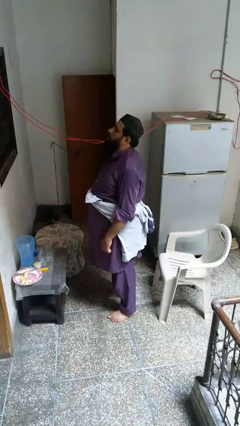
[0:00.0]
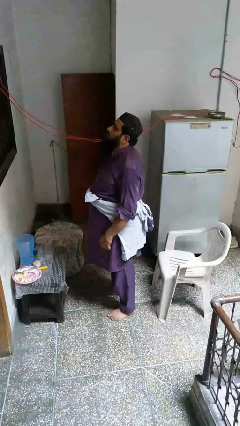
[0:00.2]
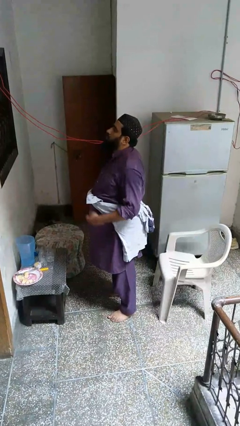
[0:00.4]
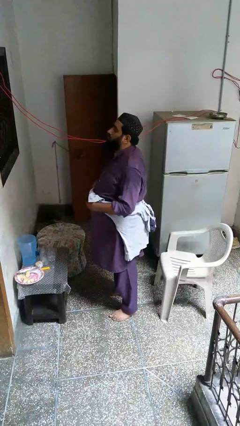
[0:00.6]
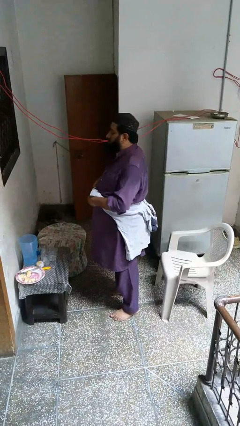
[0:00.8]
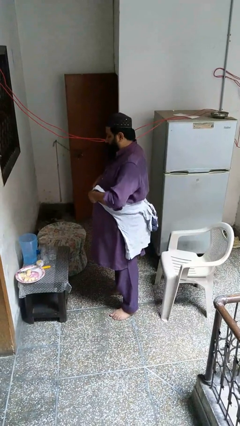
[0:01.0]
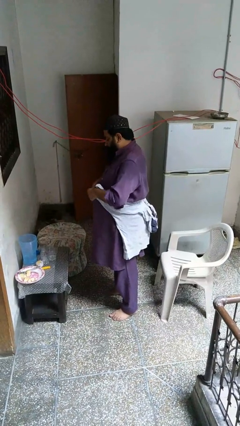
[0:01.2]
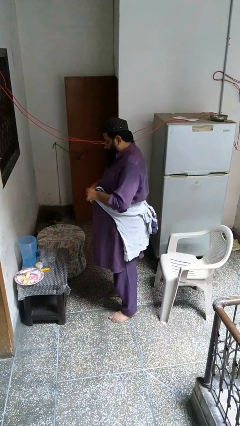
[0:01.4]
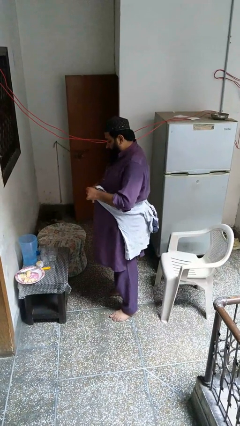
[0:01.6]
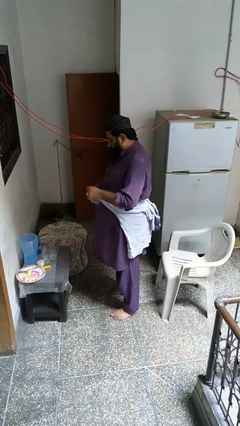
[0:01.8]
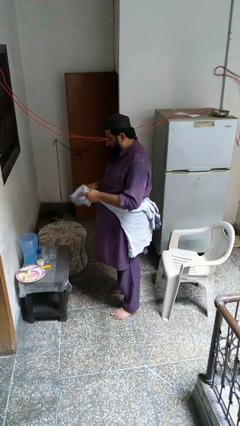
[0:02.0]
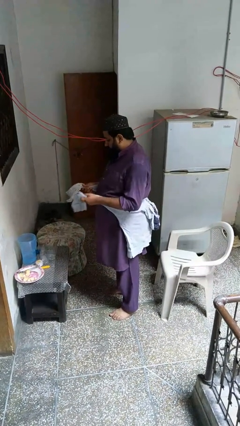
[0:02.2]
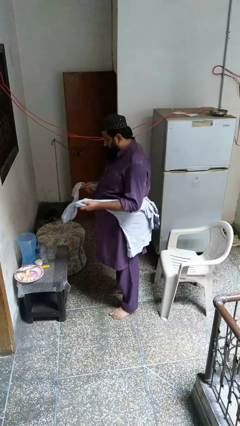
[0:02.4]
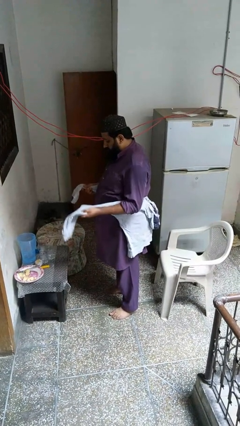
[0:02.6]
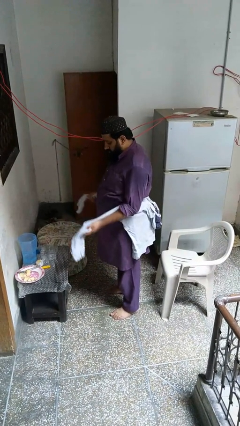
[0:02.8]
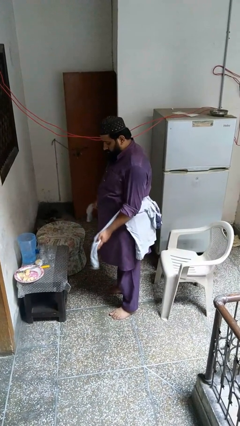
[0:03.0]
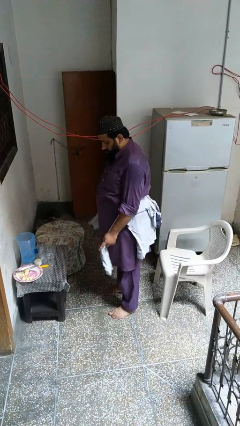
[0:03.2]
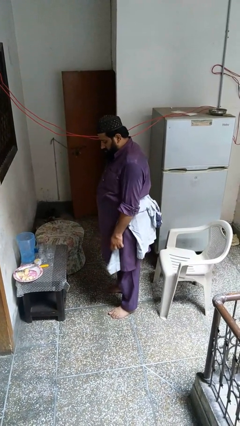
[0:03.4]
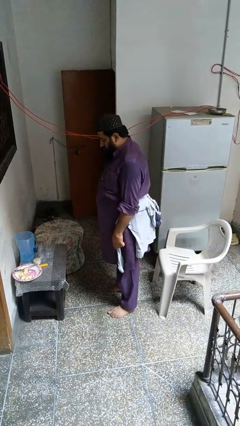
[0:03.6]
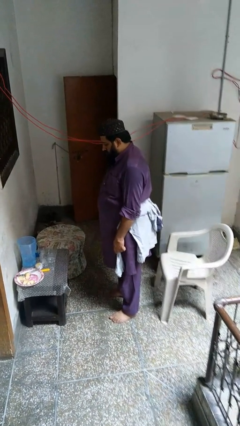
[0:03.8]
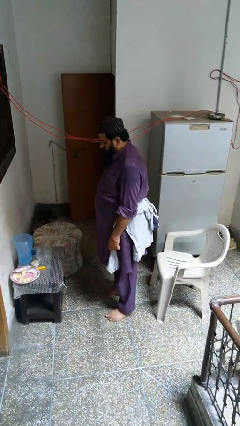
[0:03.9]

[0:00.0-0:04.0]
person unties jacket around waist

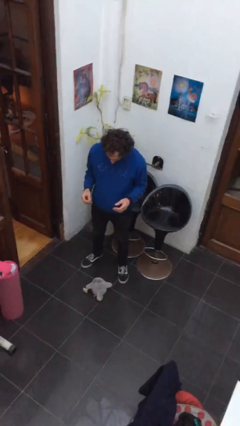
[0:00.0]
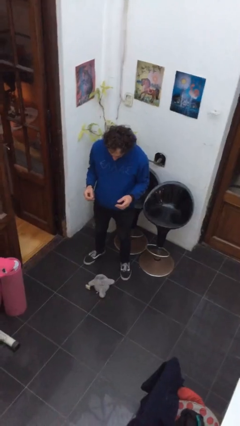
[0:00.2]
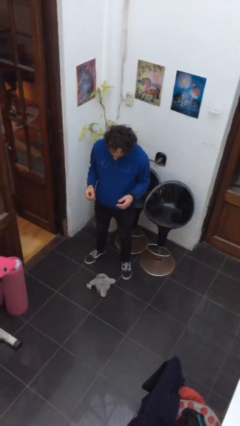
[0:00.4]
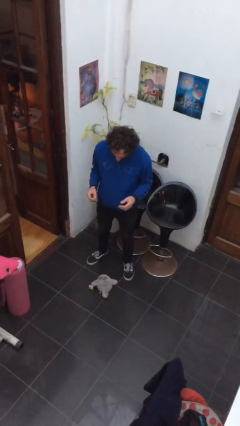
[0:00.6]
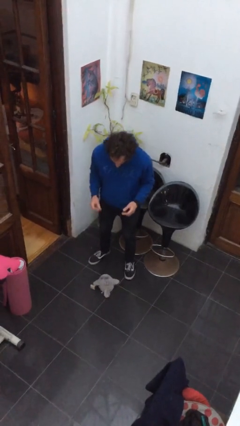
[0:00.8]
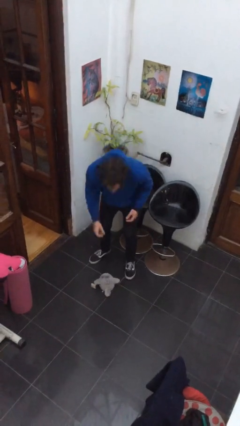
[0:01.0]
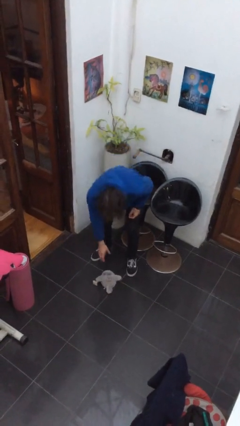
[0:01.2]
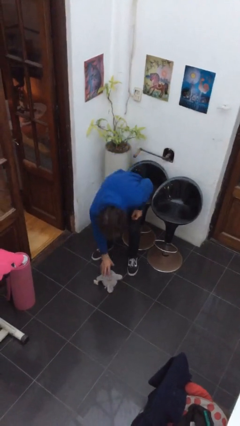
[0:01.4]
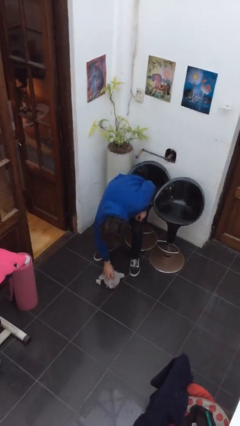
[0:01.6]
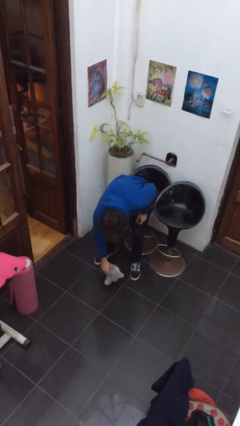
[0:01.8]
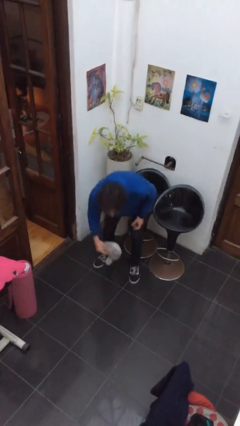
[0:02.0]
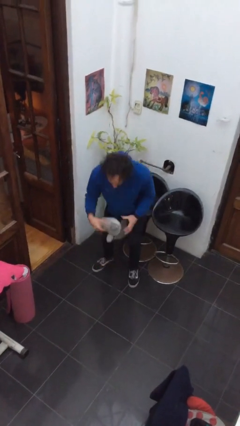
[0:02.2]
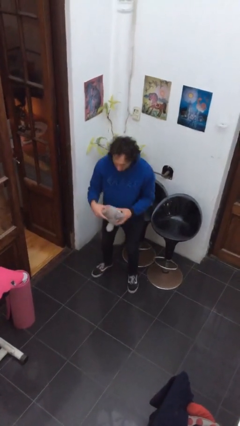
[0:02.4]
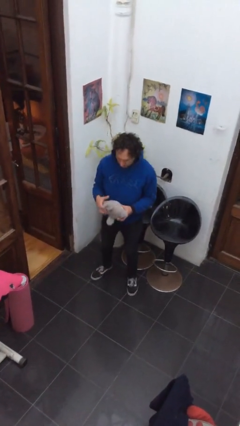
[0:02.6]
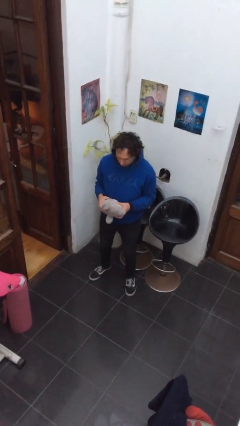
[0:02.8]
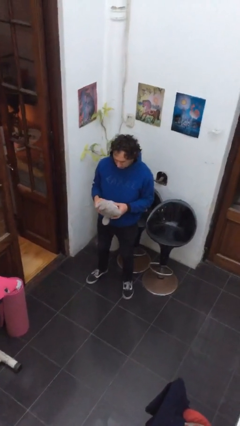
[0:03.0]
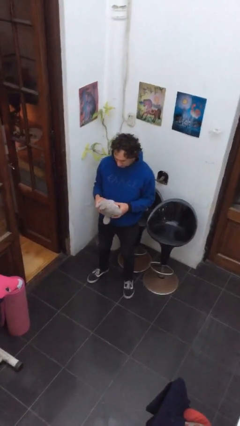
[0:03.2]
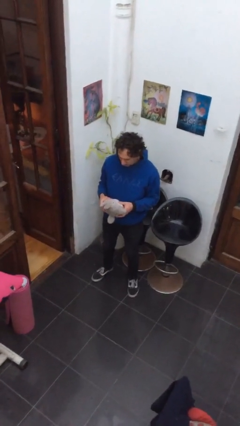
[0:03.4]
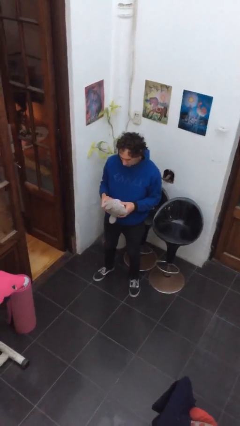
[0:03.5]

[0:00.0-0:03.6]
person picks up object from floor

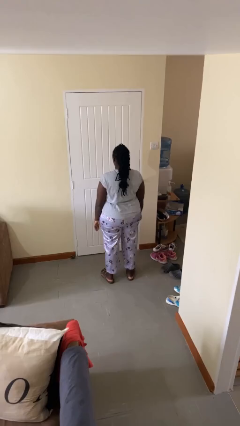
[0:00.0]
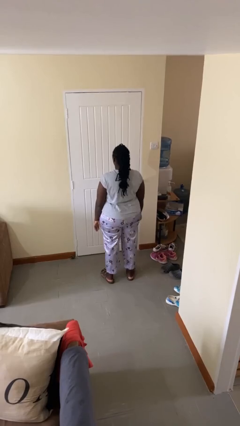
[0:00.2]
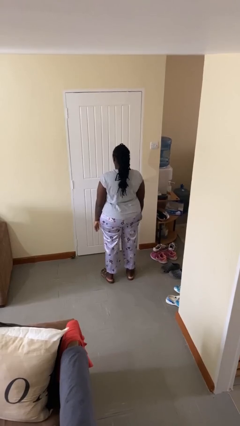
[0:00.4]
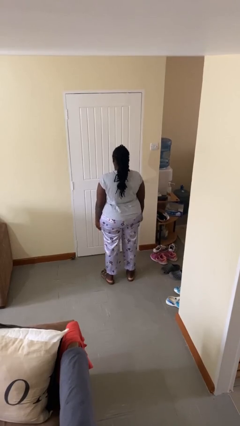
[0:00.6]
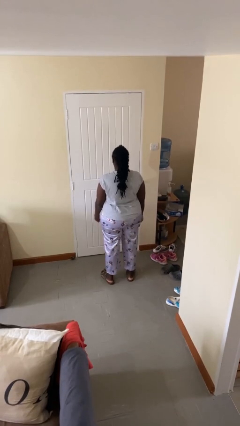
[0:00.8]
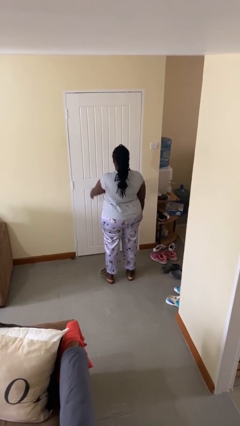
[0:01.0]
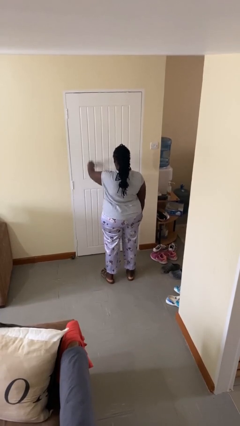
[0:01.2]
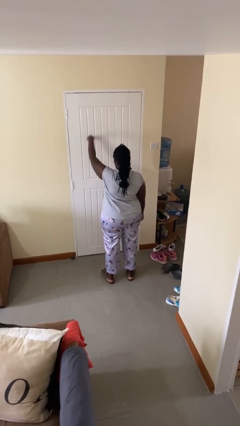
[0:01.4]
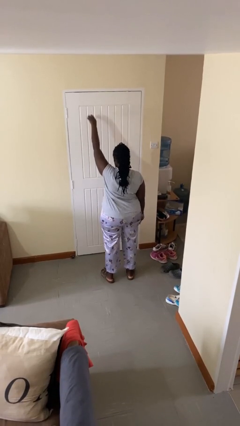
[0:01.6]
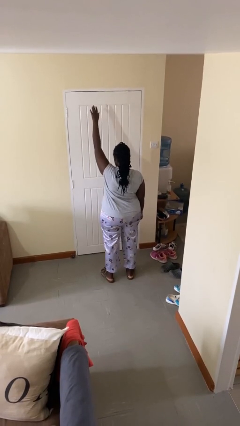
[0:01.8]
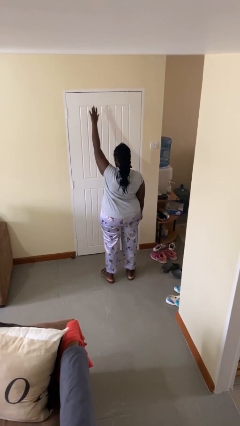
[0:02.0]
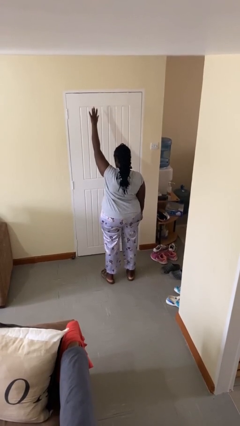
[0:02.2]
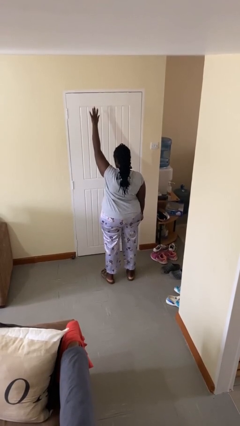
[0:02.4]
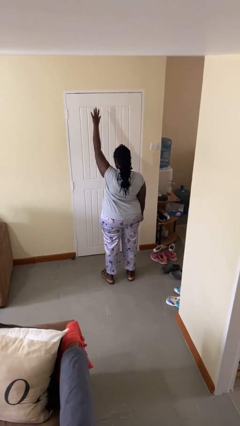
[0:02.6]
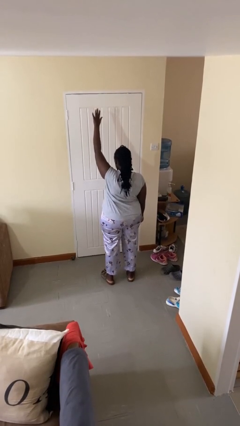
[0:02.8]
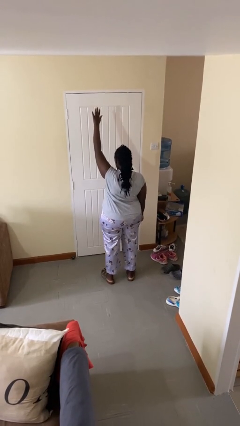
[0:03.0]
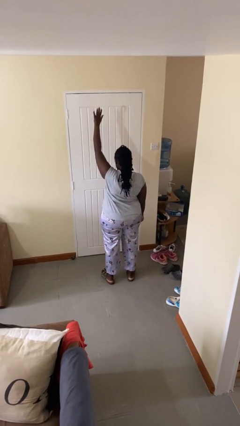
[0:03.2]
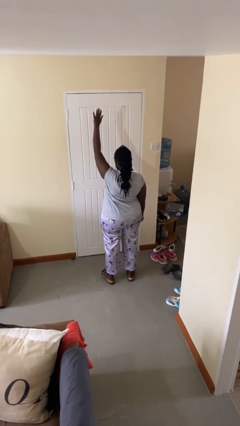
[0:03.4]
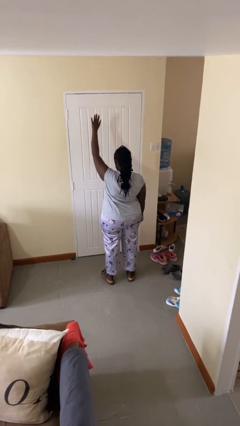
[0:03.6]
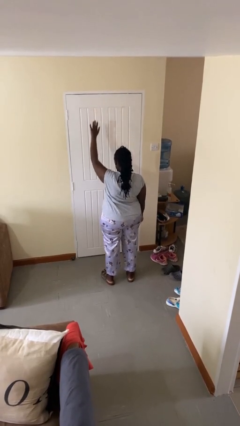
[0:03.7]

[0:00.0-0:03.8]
person gestures swipe up

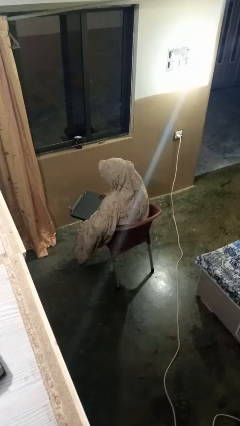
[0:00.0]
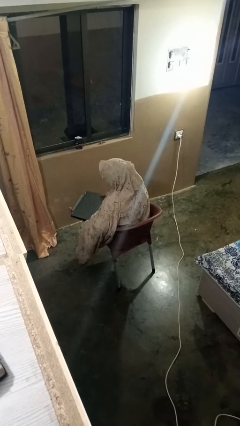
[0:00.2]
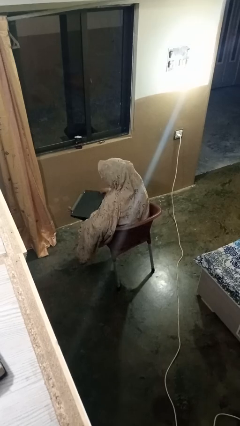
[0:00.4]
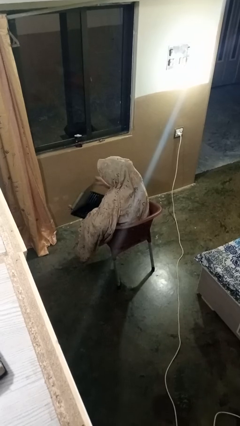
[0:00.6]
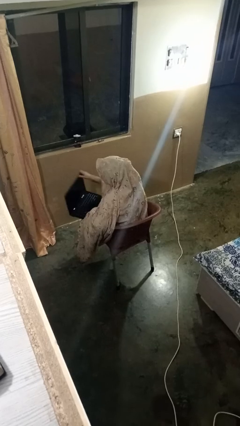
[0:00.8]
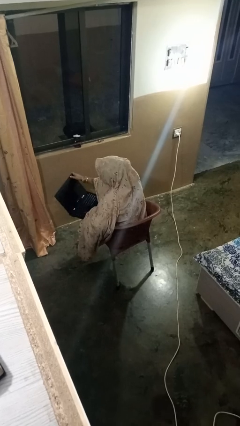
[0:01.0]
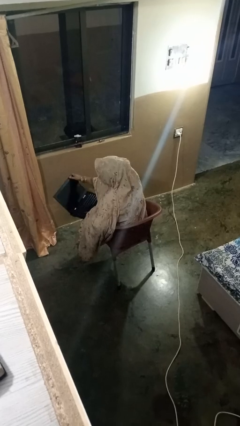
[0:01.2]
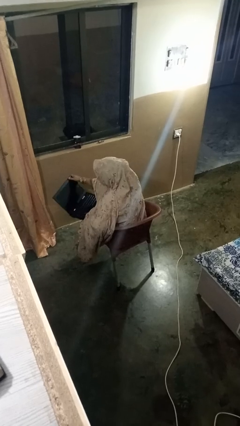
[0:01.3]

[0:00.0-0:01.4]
person opens laptop

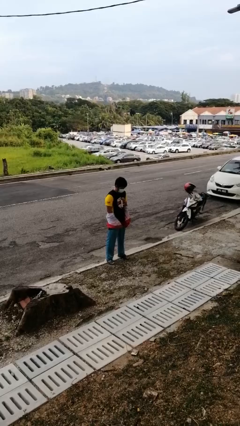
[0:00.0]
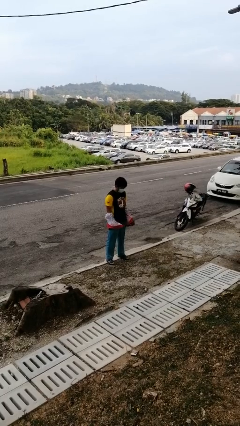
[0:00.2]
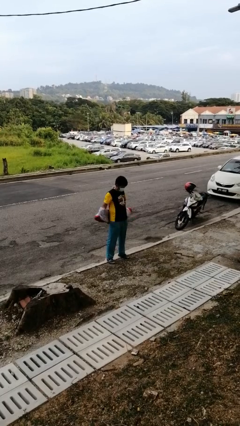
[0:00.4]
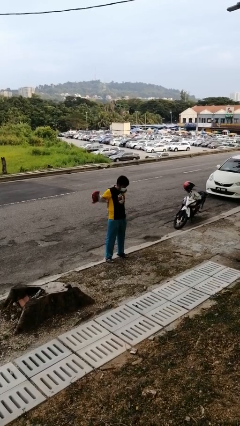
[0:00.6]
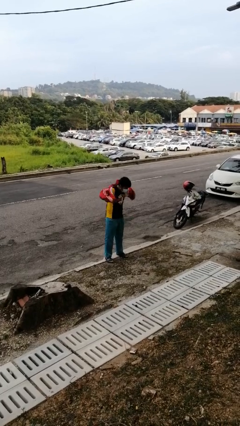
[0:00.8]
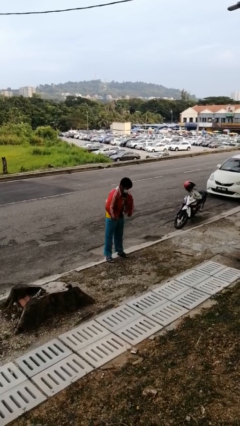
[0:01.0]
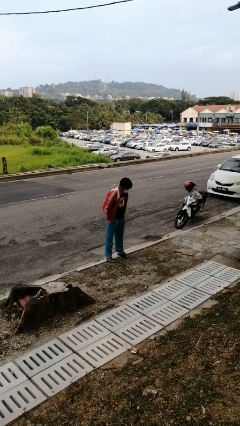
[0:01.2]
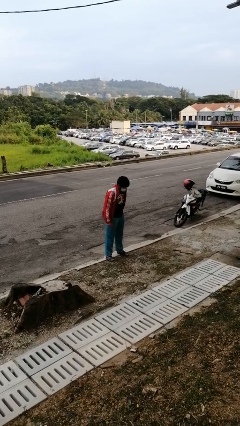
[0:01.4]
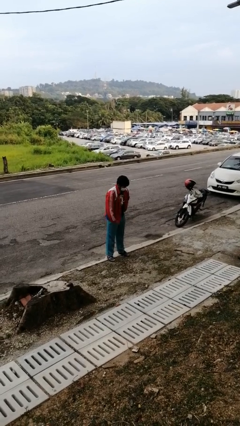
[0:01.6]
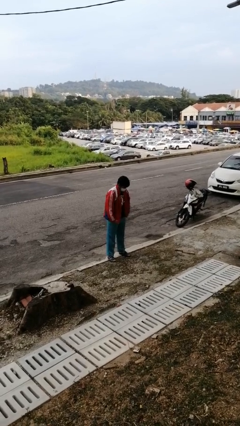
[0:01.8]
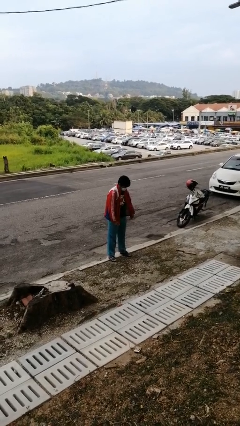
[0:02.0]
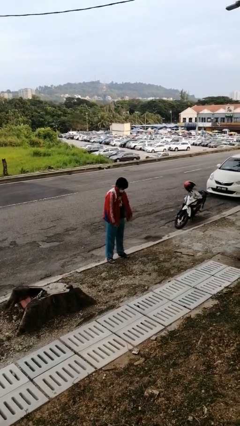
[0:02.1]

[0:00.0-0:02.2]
person puts on jacket

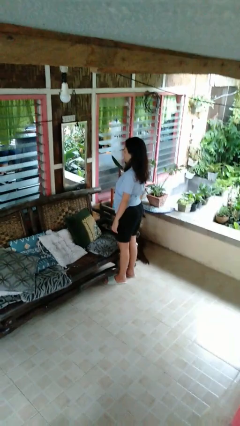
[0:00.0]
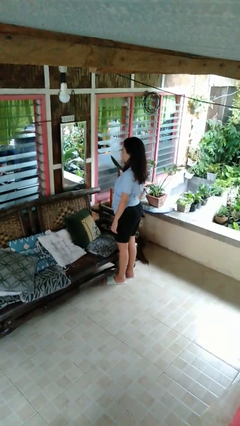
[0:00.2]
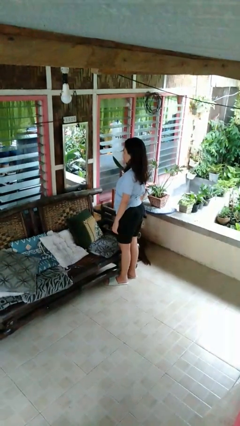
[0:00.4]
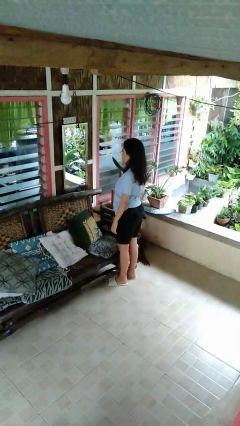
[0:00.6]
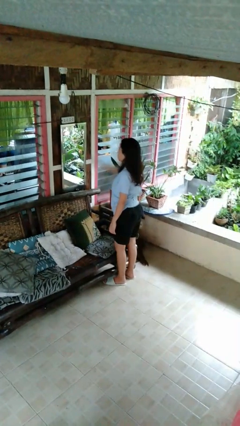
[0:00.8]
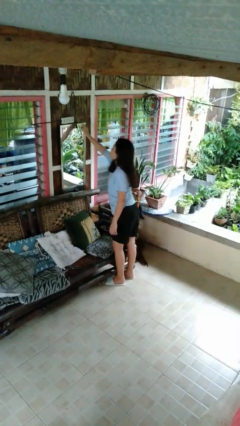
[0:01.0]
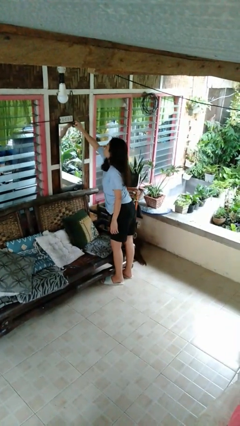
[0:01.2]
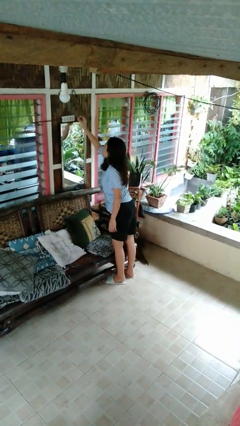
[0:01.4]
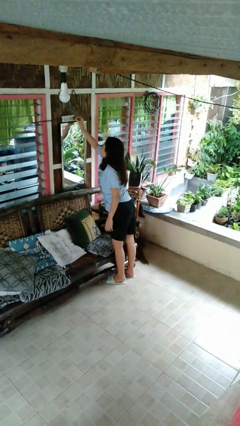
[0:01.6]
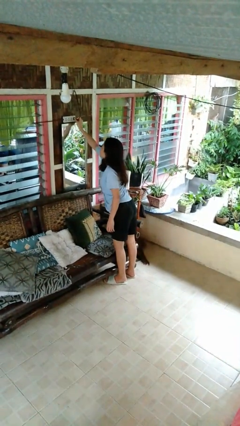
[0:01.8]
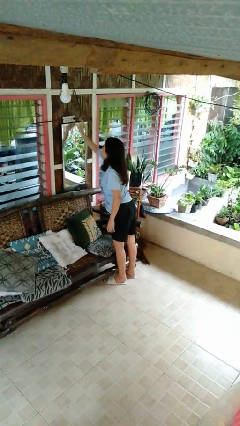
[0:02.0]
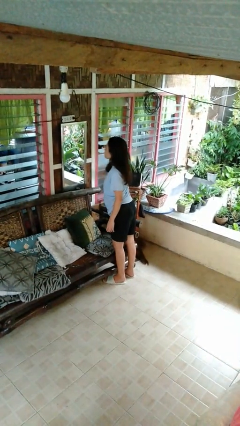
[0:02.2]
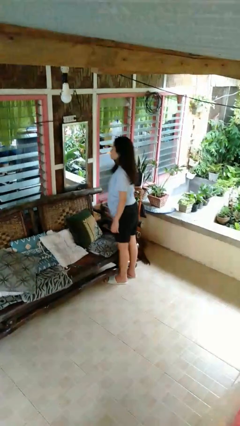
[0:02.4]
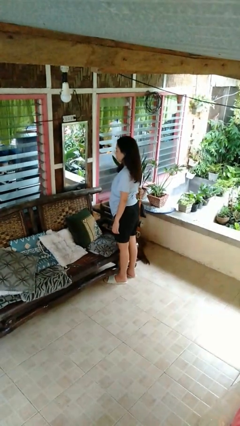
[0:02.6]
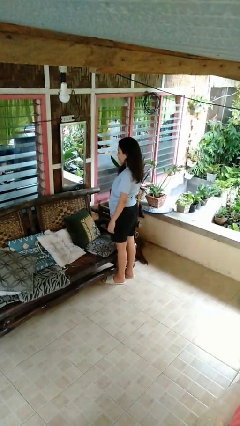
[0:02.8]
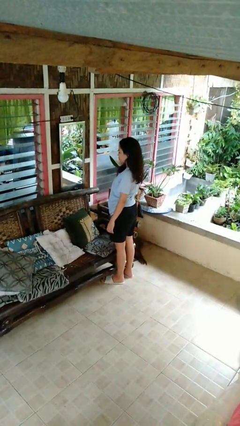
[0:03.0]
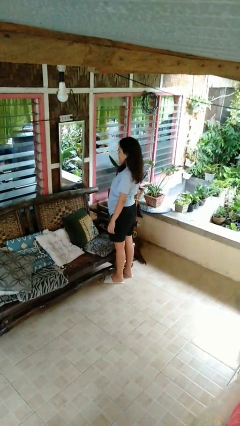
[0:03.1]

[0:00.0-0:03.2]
person plugs into electrical socket
